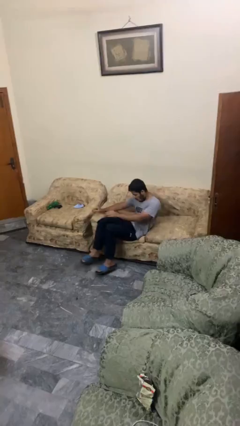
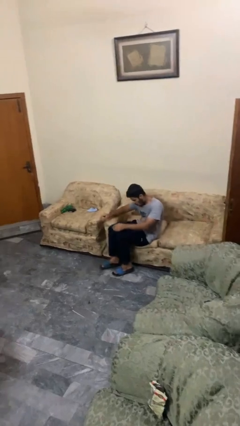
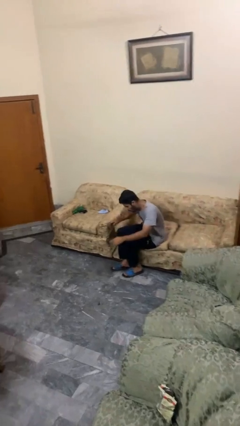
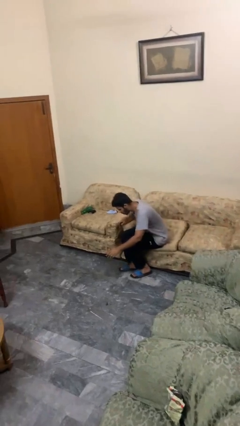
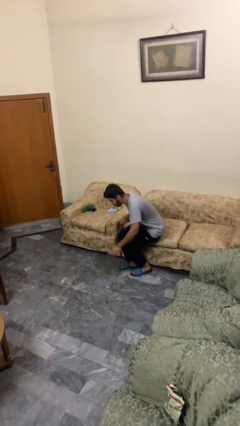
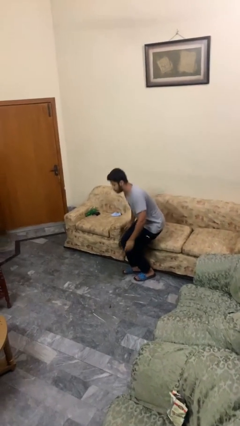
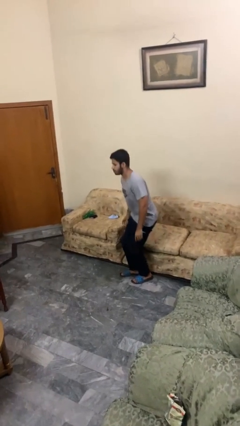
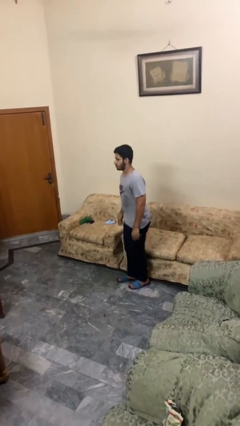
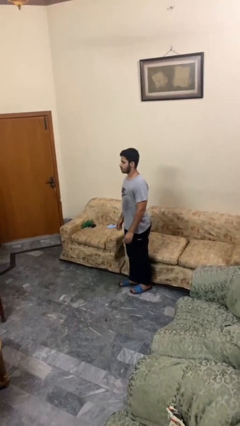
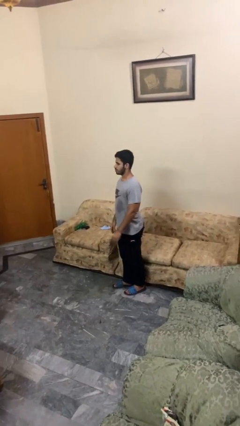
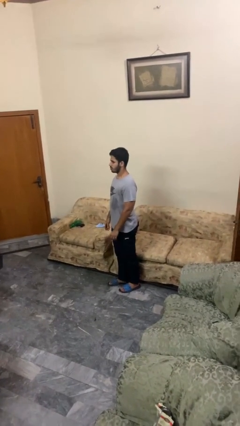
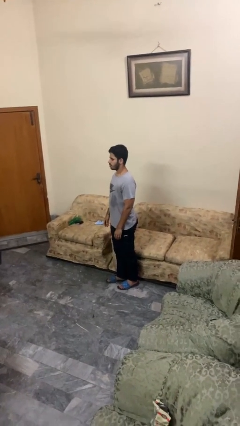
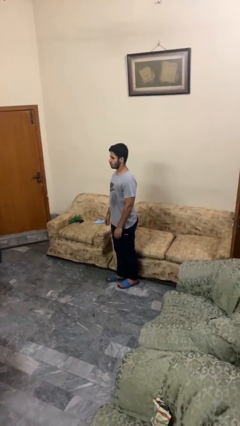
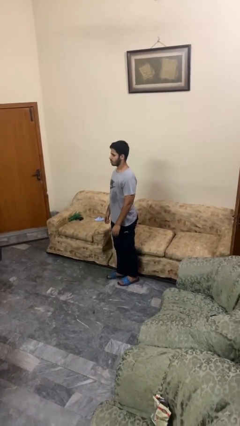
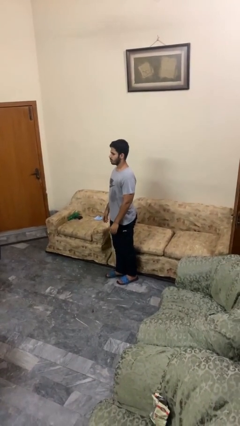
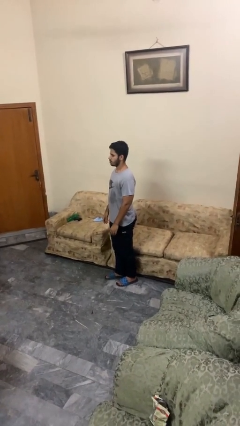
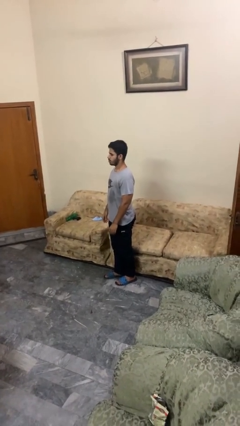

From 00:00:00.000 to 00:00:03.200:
person stands up

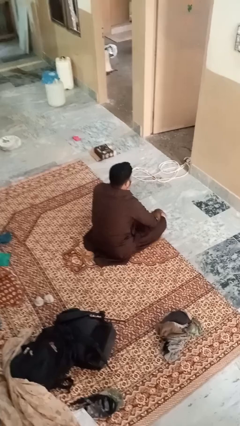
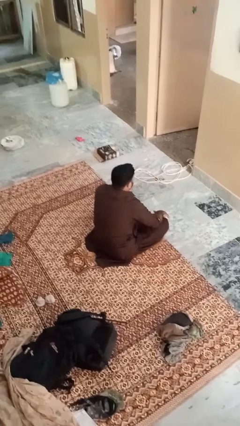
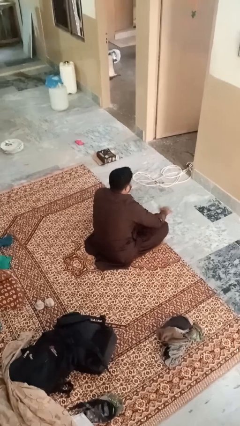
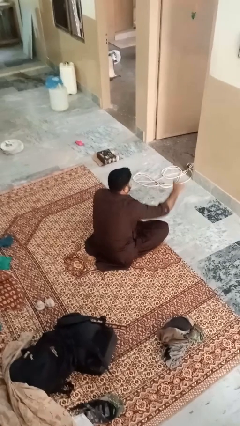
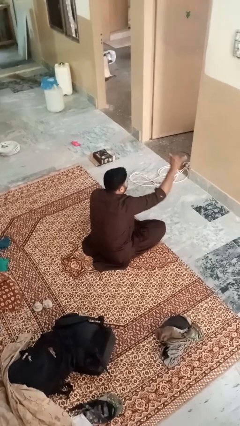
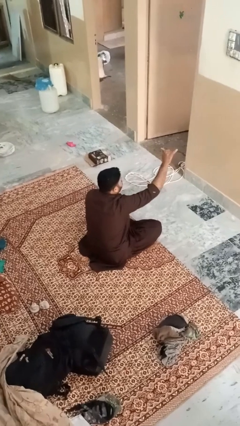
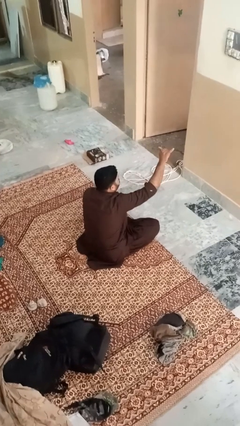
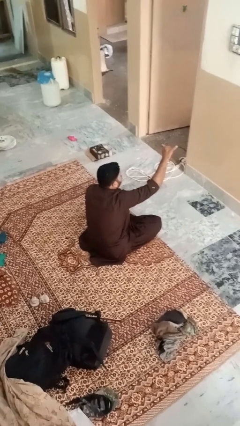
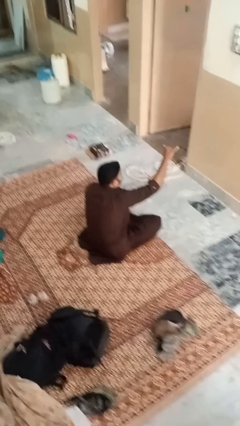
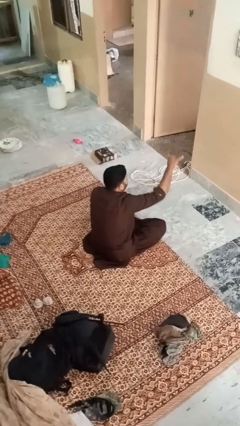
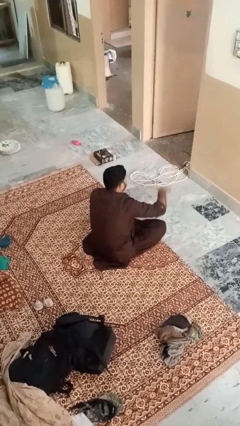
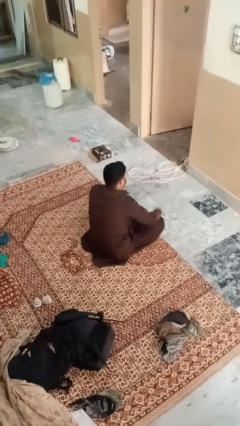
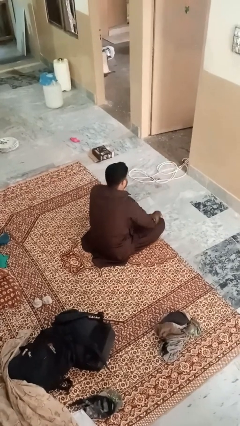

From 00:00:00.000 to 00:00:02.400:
person gestures hang loose

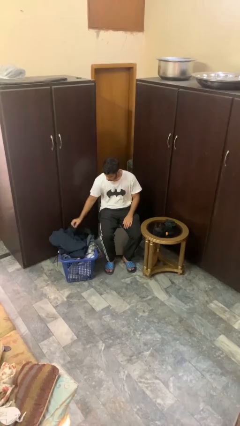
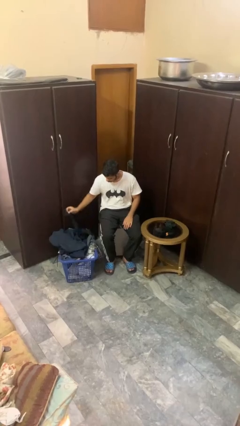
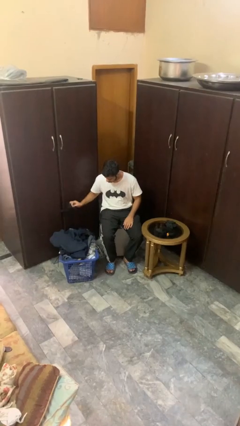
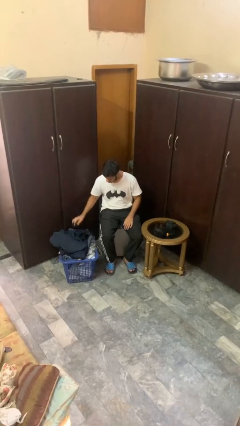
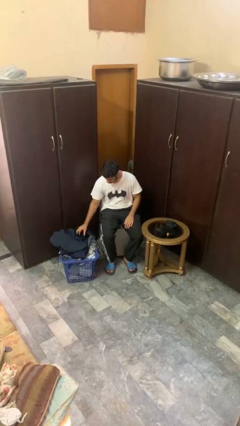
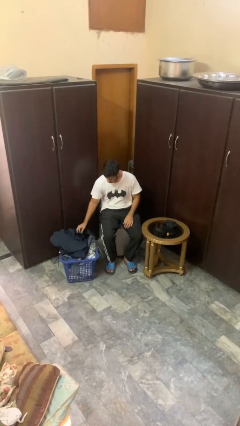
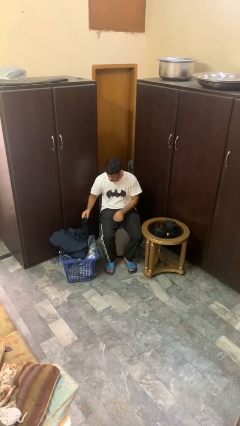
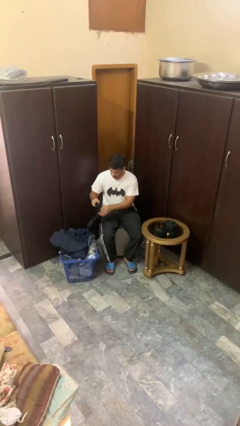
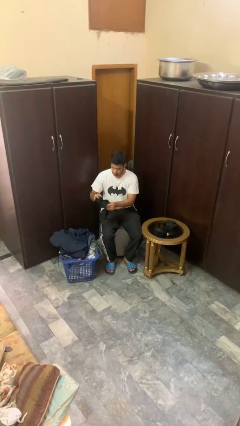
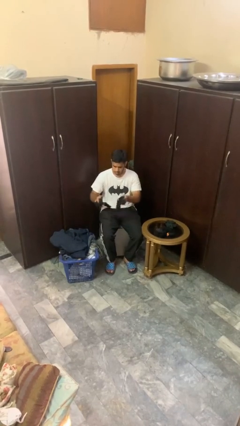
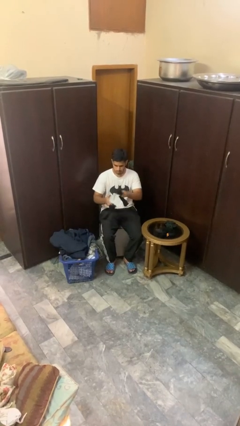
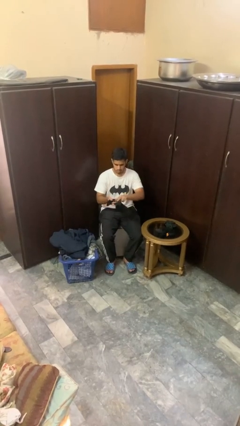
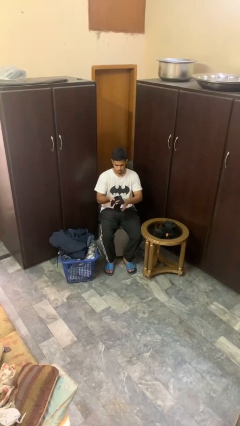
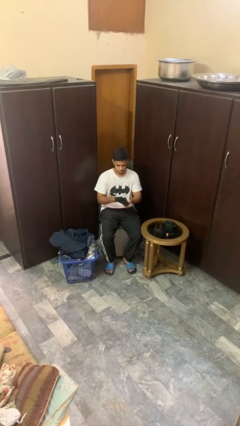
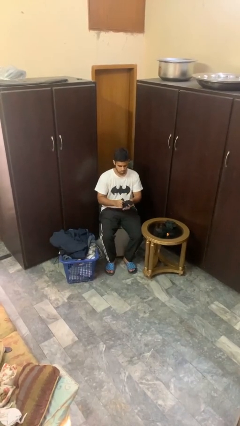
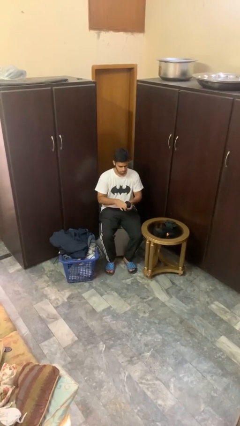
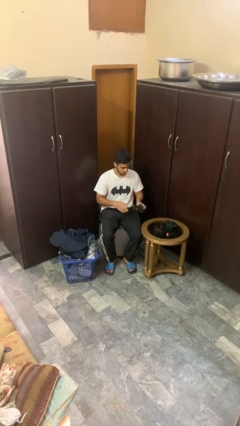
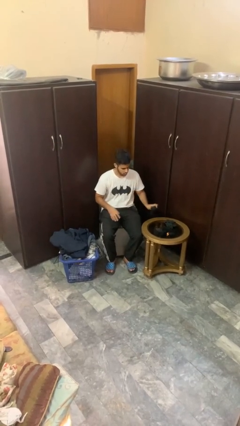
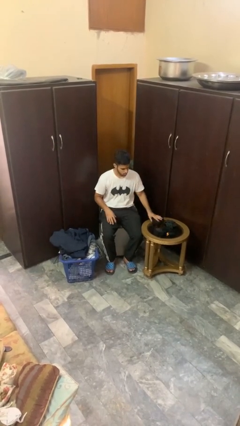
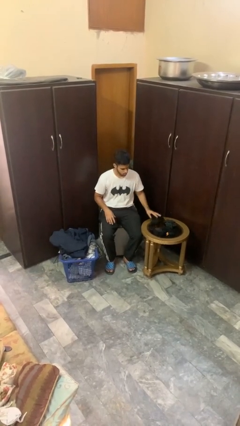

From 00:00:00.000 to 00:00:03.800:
person folds socks

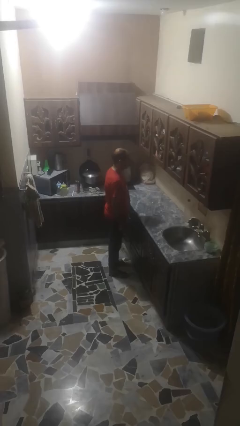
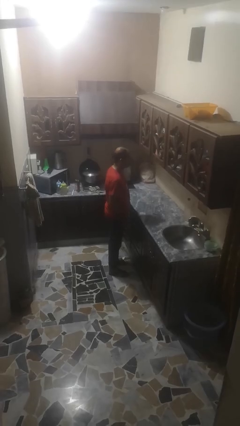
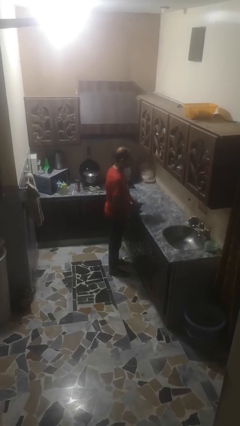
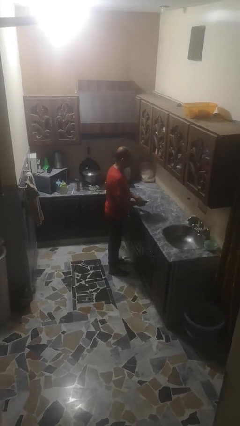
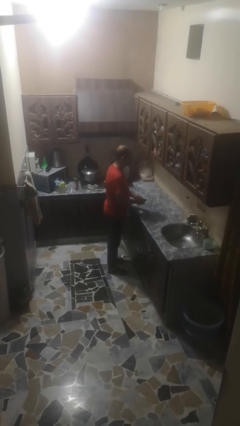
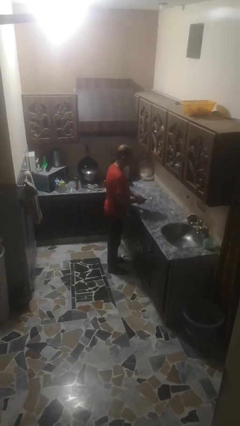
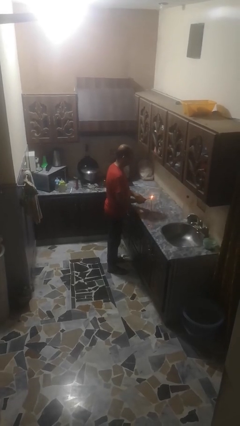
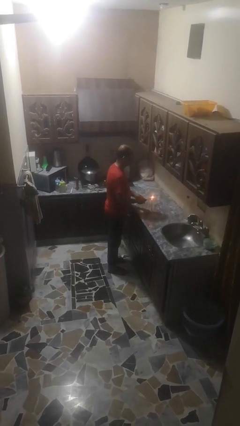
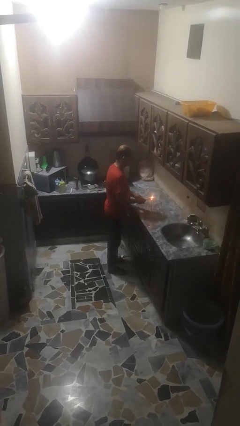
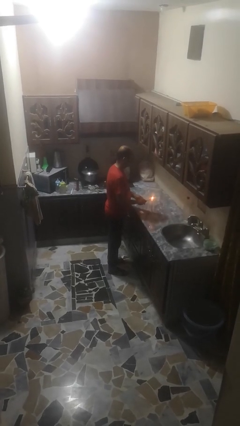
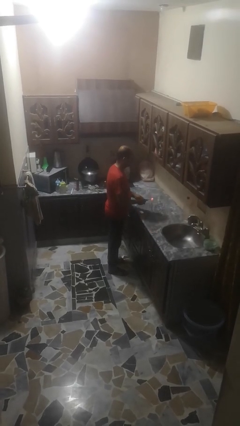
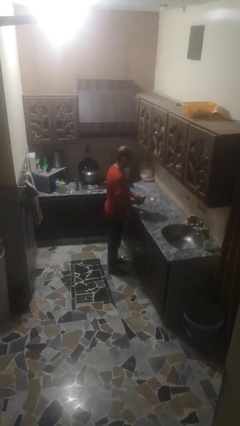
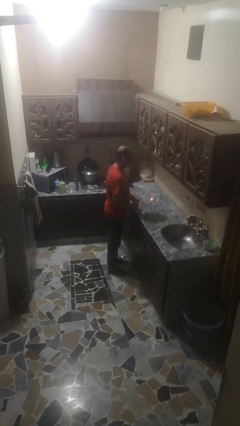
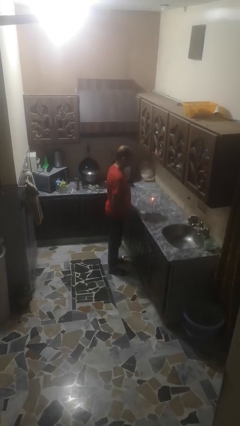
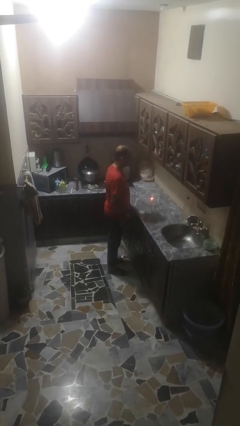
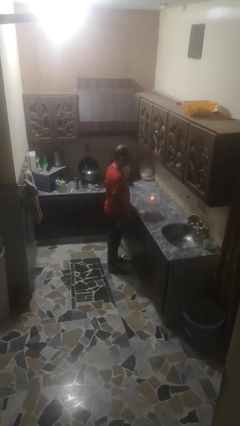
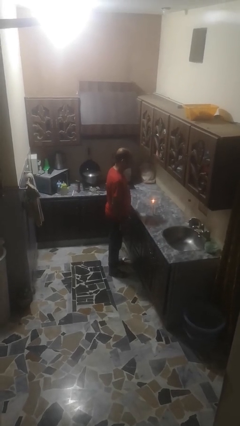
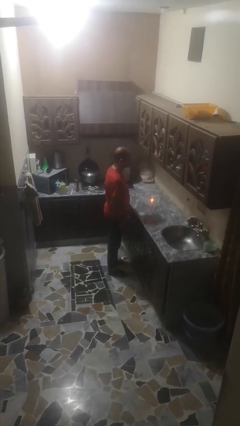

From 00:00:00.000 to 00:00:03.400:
person lights candle

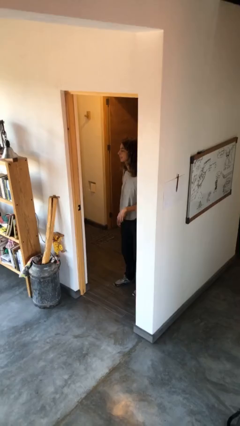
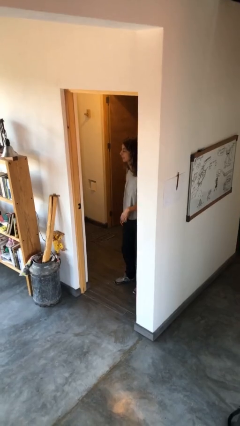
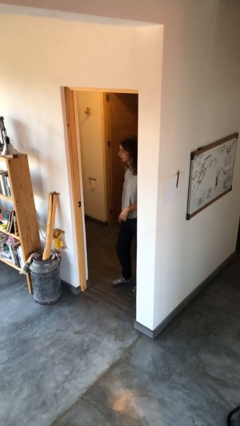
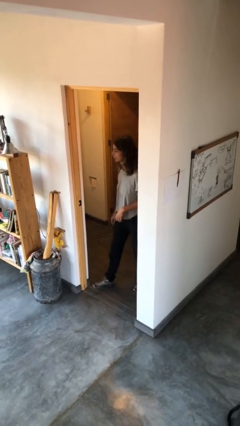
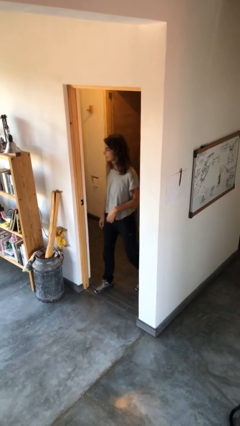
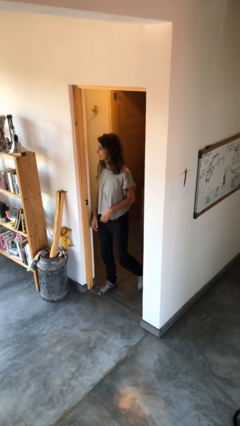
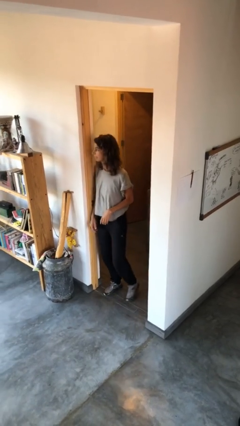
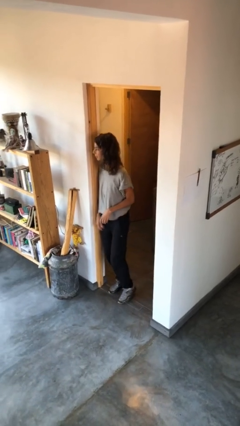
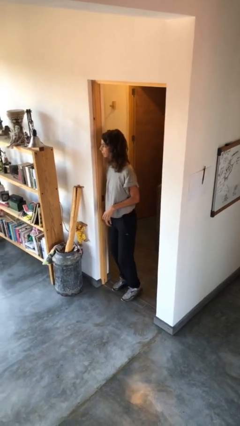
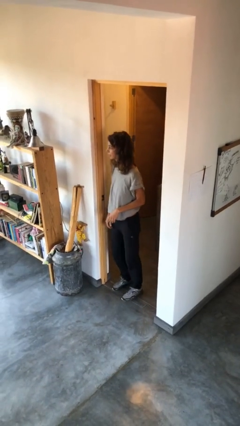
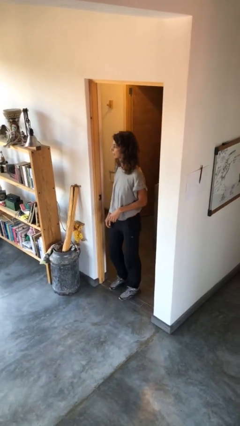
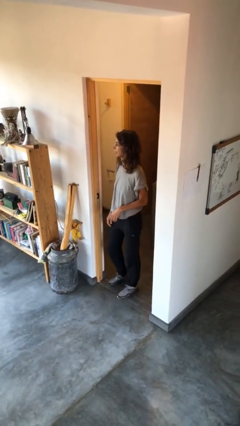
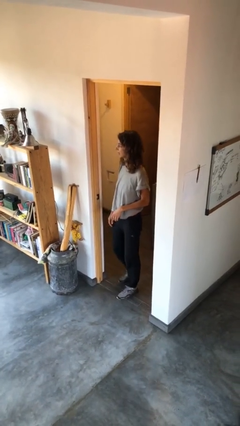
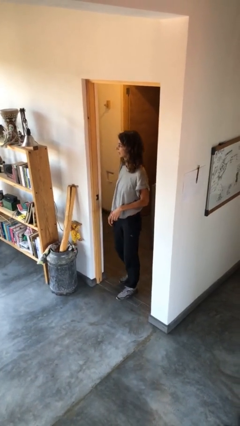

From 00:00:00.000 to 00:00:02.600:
person bumps into wall

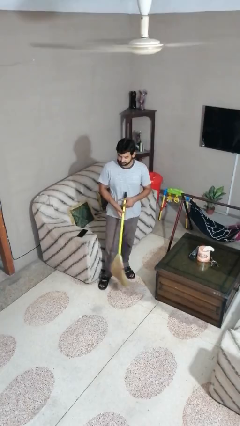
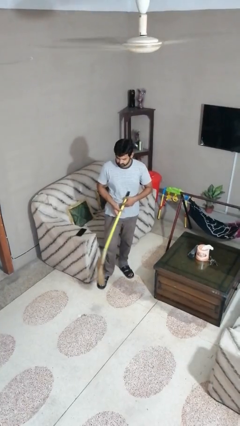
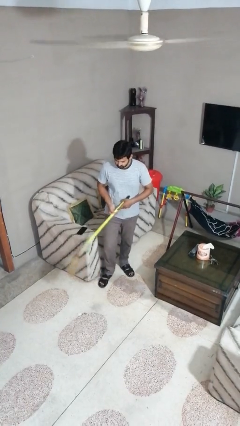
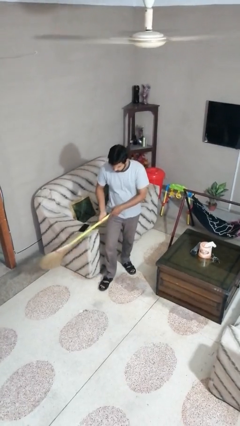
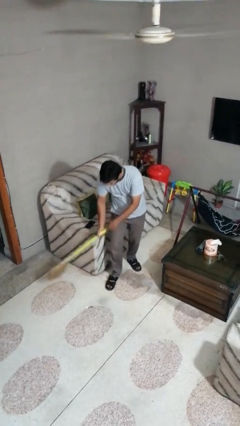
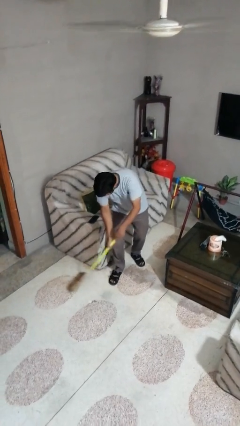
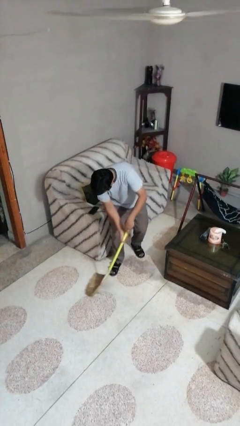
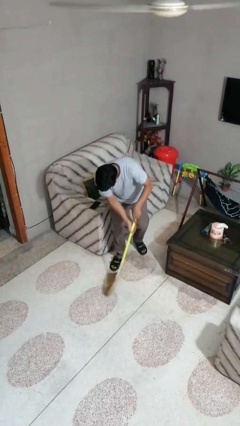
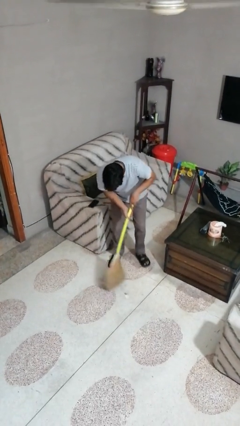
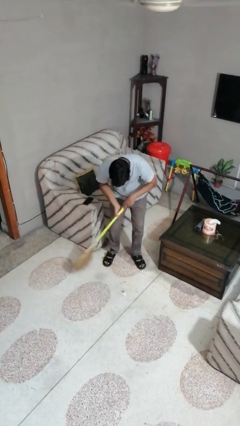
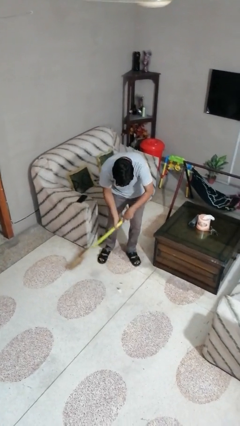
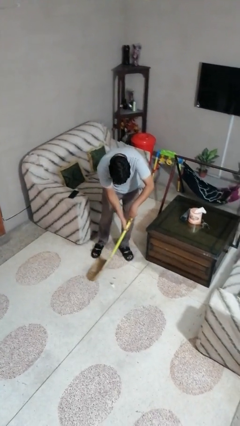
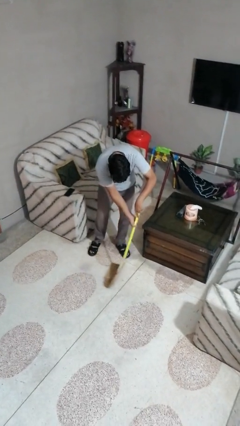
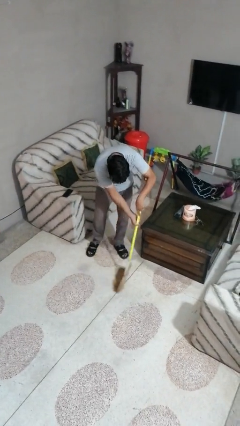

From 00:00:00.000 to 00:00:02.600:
person sweeps floor
